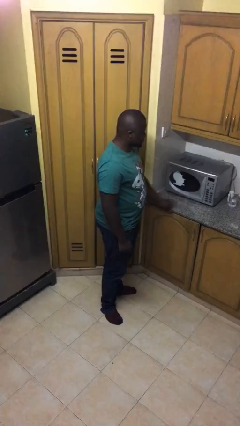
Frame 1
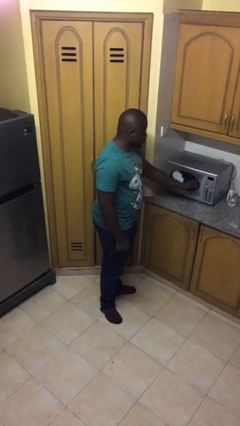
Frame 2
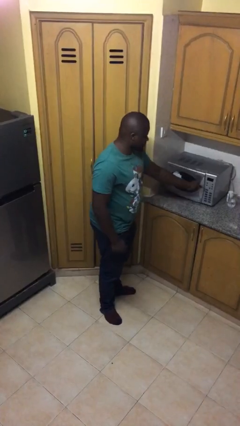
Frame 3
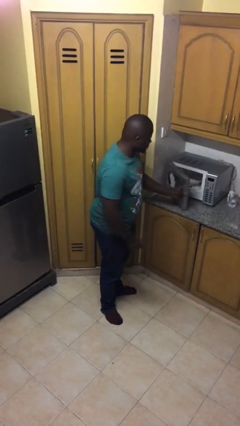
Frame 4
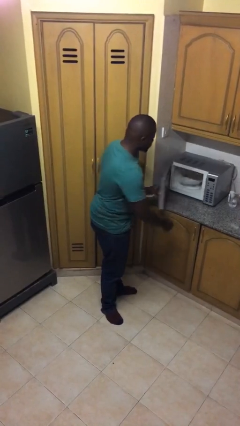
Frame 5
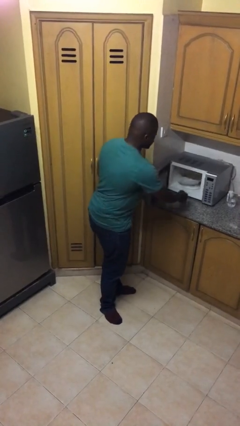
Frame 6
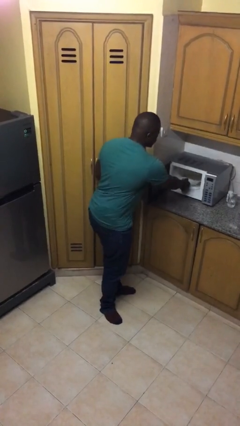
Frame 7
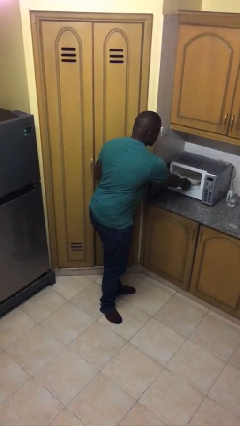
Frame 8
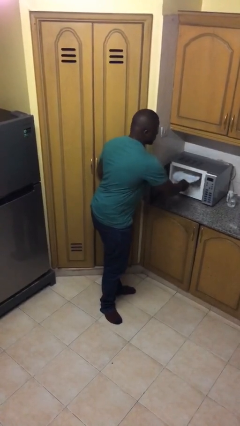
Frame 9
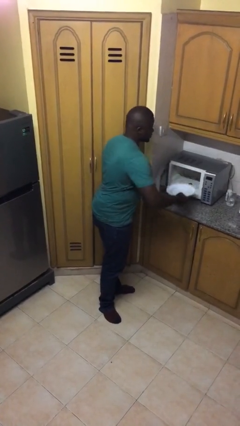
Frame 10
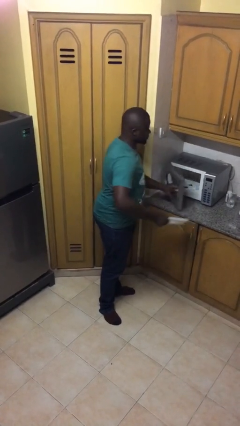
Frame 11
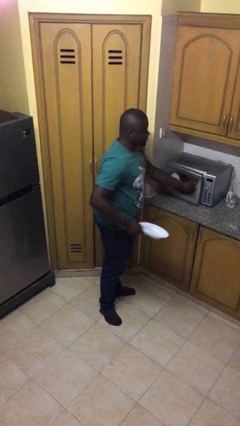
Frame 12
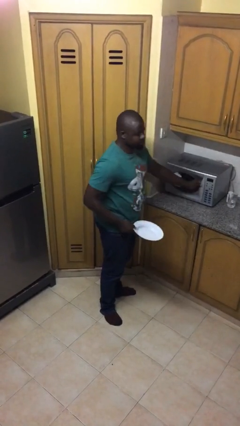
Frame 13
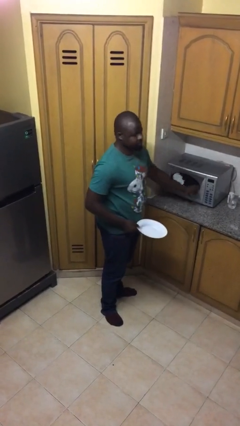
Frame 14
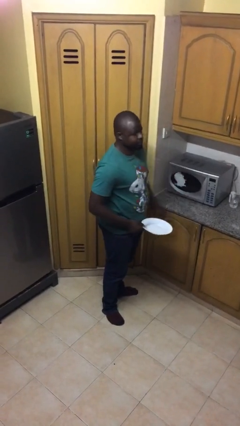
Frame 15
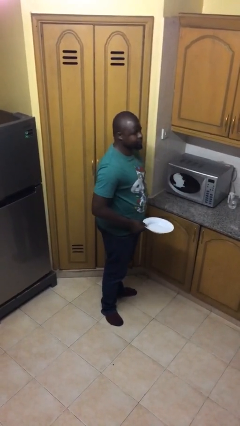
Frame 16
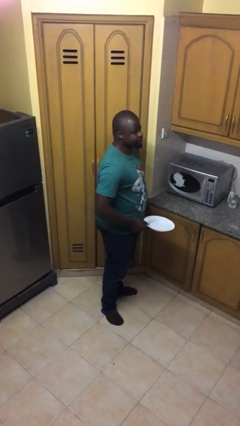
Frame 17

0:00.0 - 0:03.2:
person takes object from microwave

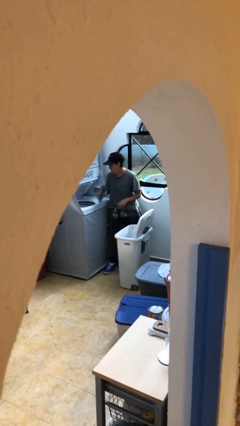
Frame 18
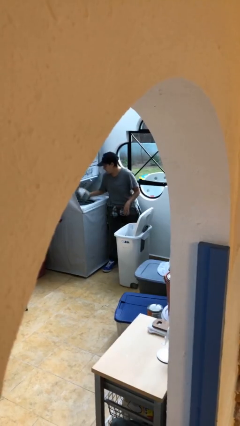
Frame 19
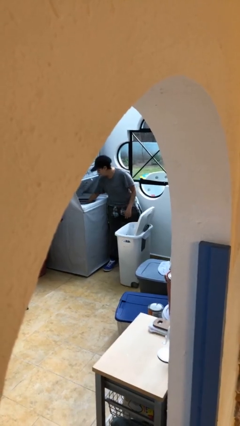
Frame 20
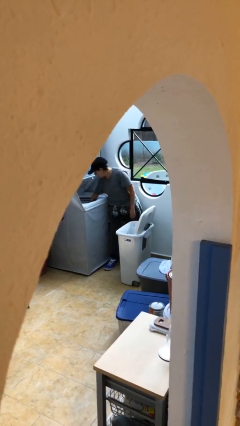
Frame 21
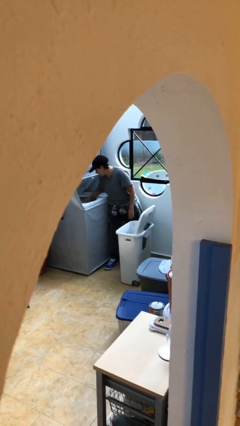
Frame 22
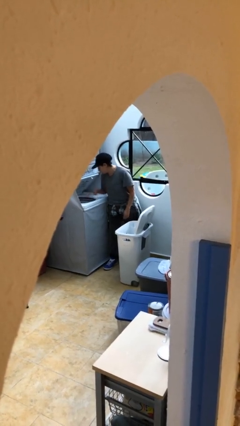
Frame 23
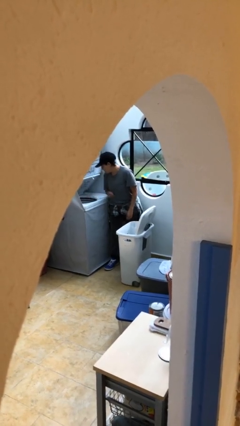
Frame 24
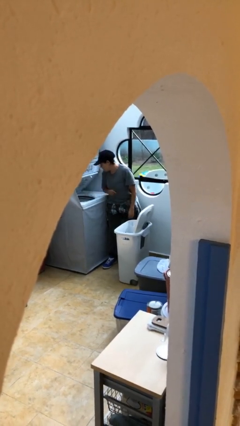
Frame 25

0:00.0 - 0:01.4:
person loads clotheswasher

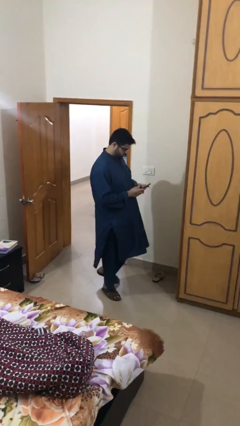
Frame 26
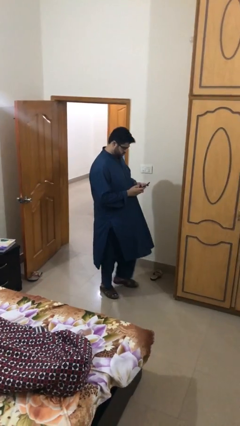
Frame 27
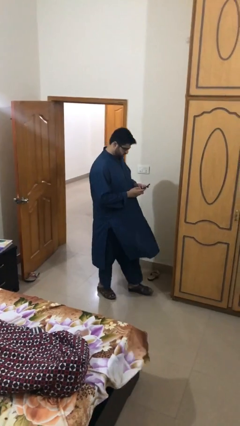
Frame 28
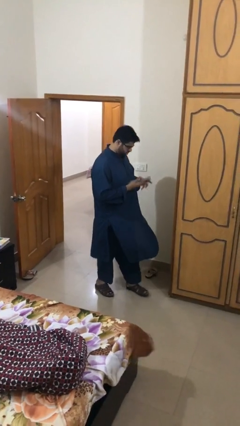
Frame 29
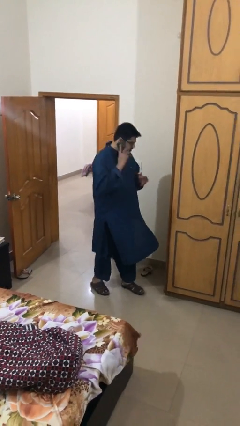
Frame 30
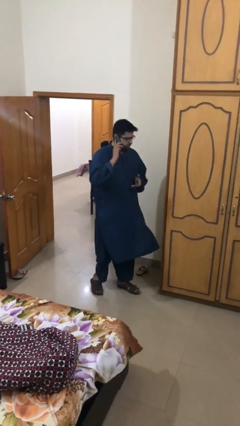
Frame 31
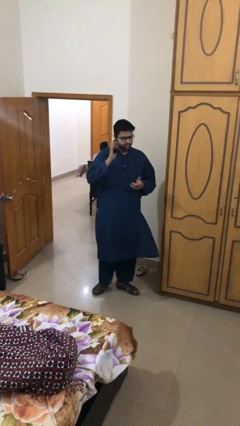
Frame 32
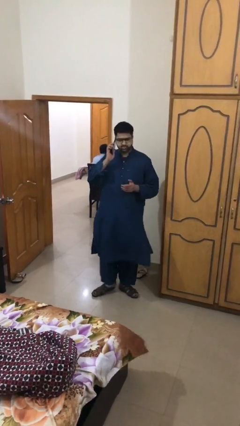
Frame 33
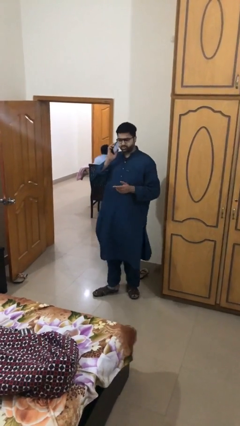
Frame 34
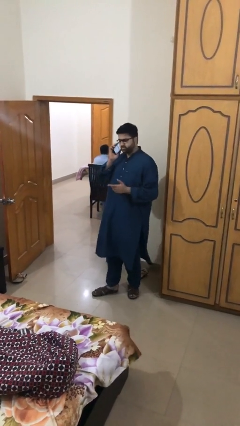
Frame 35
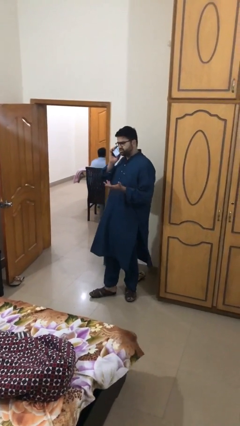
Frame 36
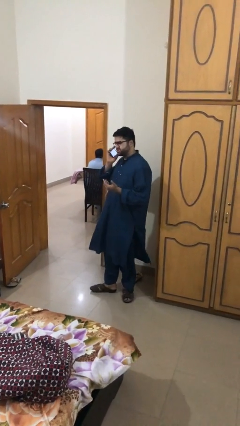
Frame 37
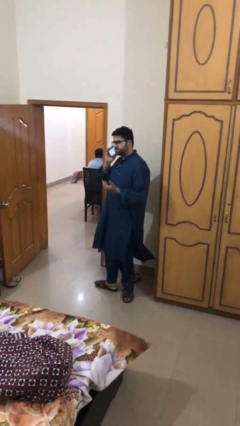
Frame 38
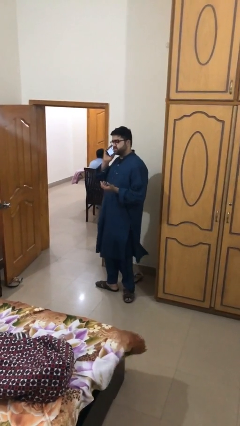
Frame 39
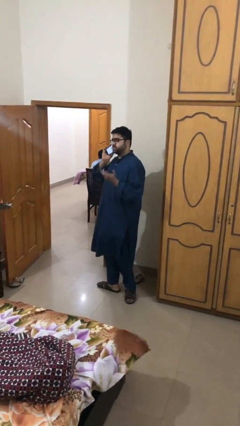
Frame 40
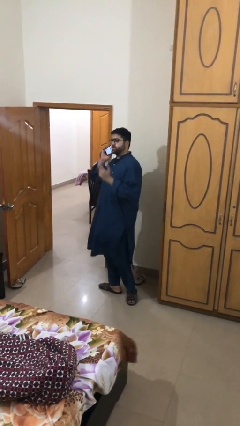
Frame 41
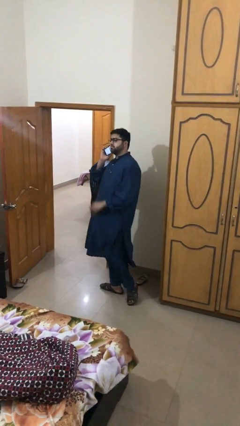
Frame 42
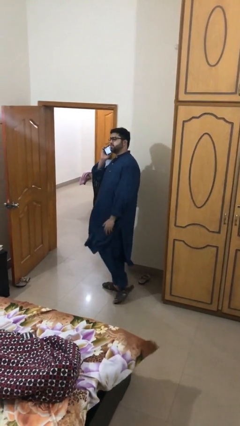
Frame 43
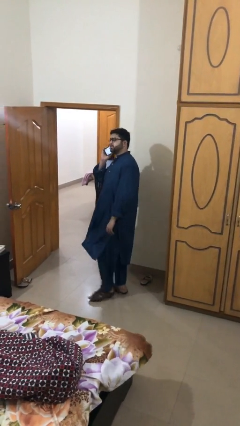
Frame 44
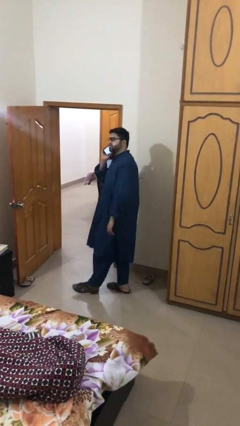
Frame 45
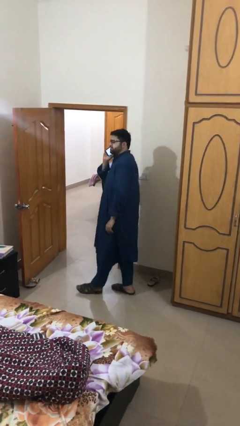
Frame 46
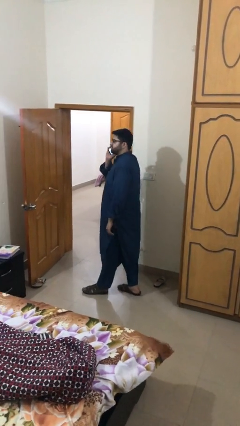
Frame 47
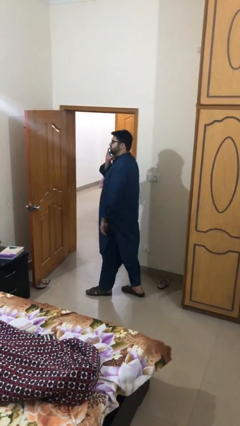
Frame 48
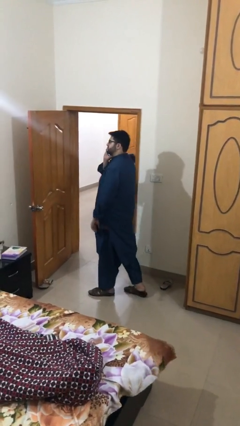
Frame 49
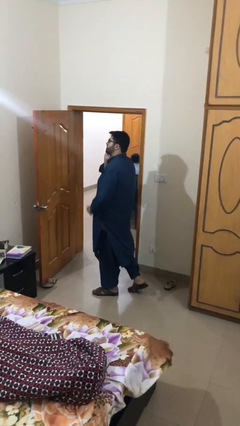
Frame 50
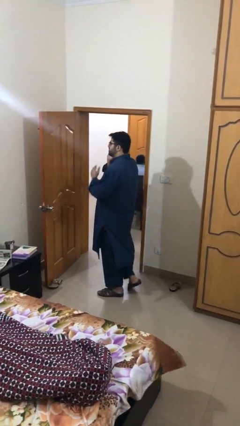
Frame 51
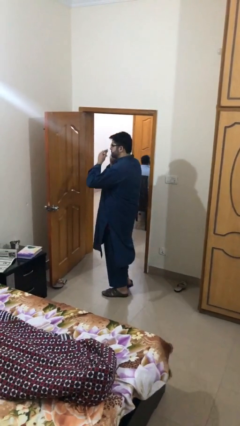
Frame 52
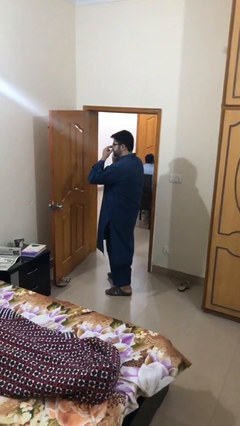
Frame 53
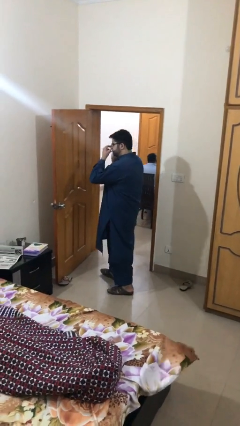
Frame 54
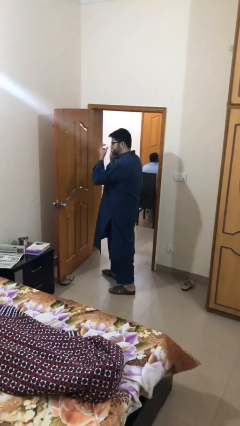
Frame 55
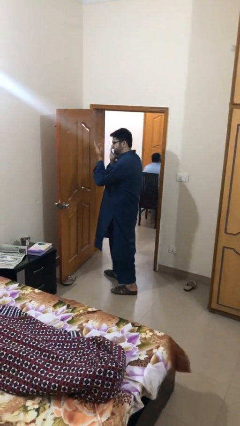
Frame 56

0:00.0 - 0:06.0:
person talks on phone

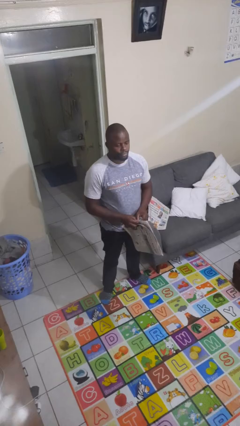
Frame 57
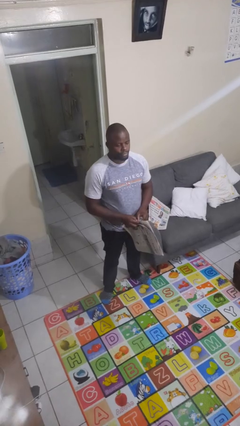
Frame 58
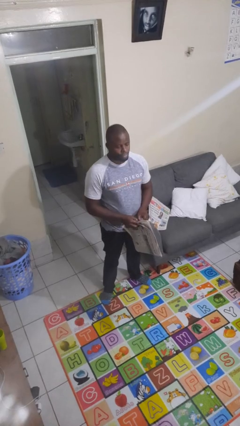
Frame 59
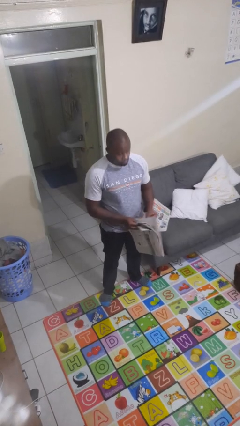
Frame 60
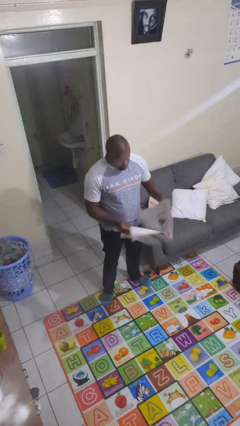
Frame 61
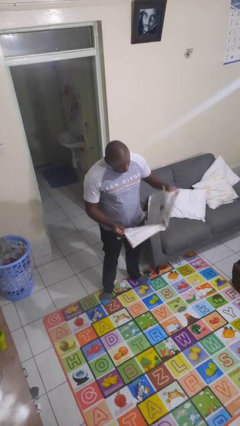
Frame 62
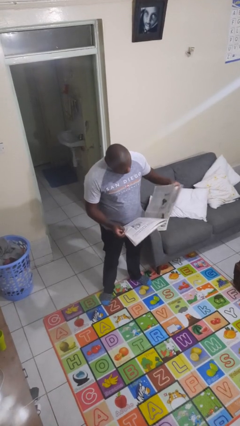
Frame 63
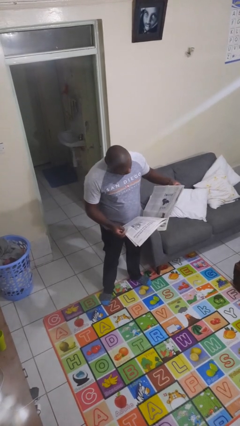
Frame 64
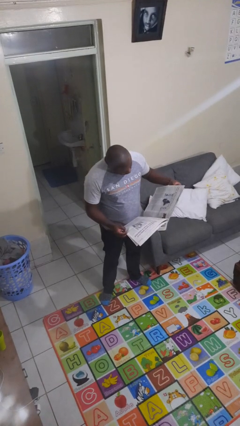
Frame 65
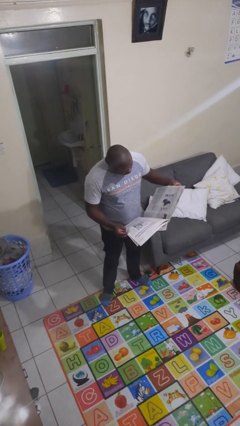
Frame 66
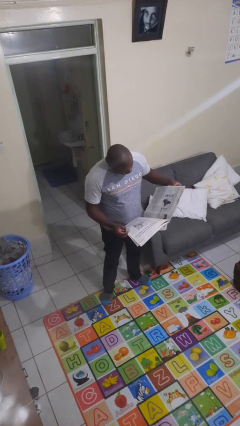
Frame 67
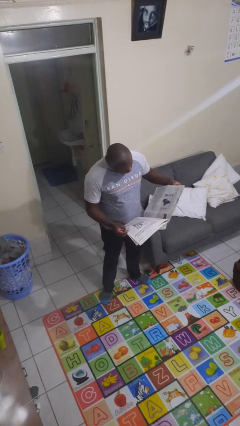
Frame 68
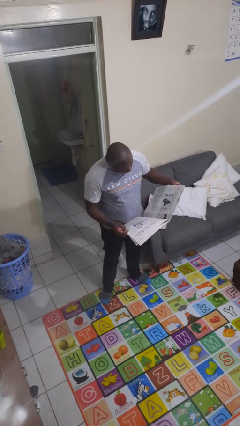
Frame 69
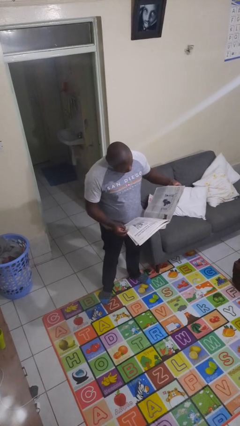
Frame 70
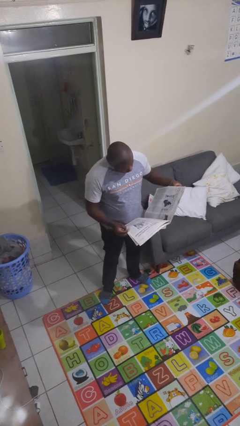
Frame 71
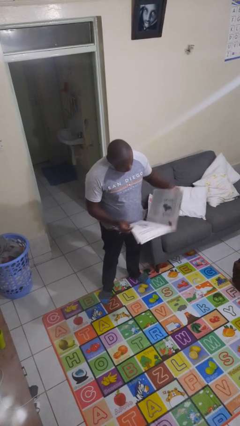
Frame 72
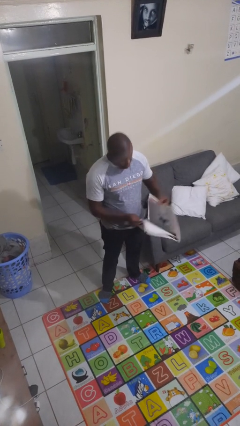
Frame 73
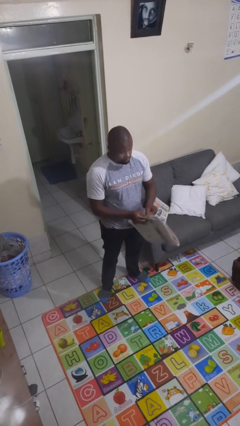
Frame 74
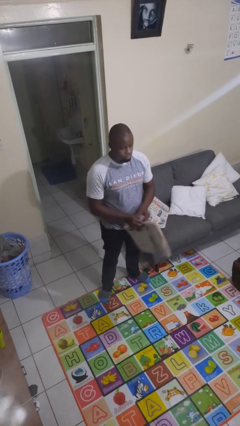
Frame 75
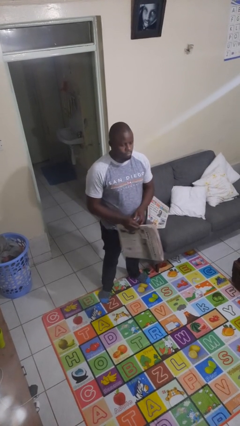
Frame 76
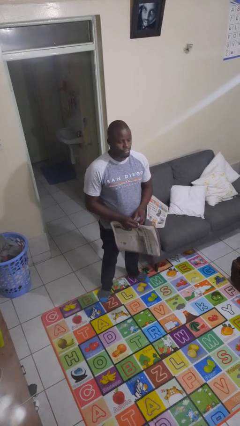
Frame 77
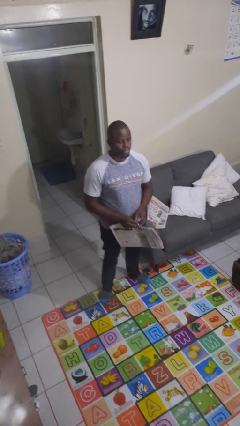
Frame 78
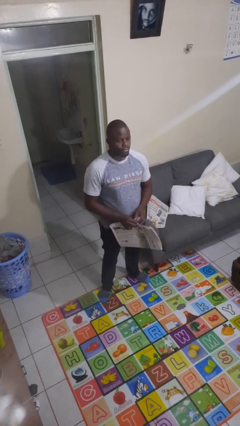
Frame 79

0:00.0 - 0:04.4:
person reads newspaper

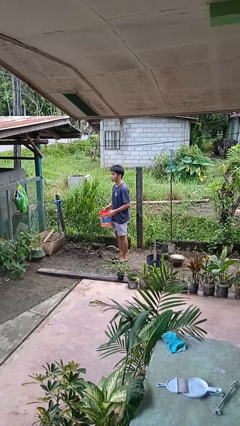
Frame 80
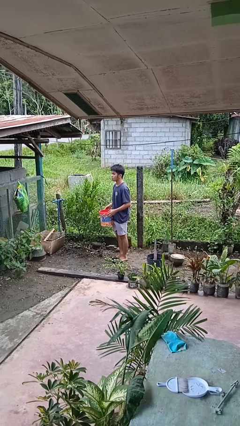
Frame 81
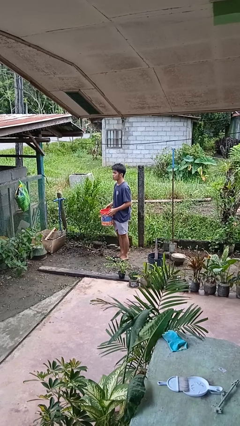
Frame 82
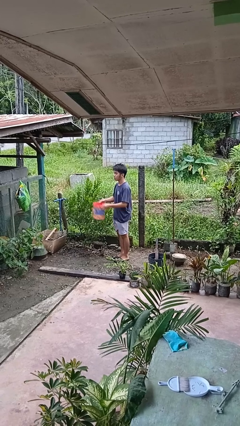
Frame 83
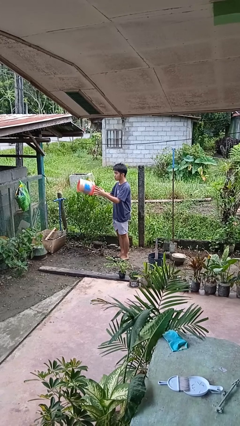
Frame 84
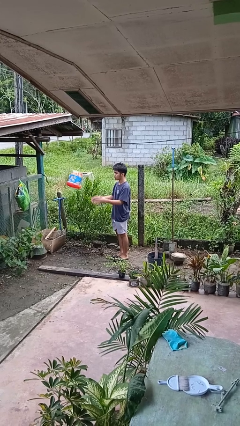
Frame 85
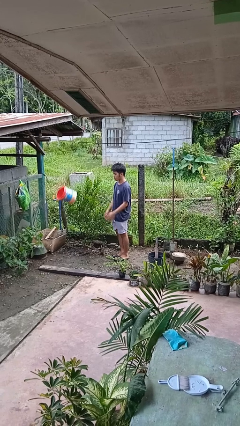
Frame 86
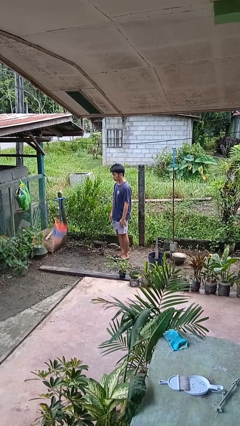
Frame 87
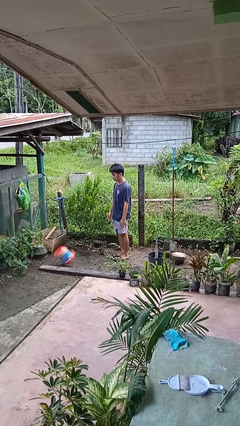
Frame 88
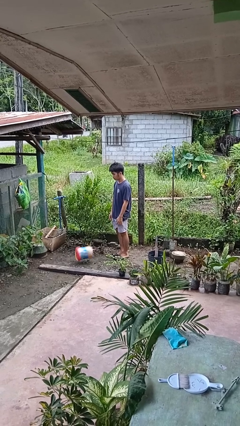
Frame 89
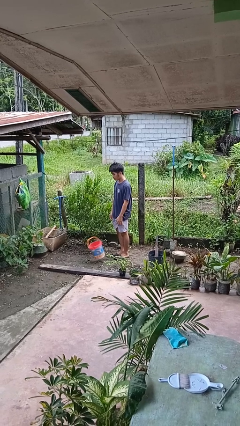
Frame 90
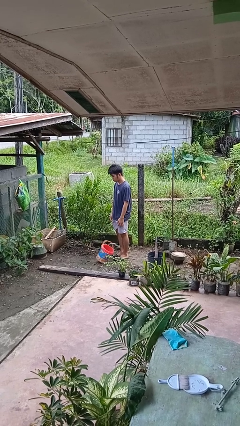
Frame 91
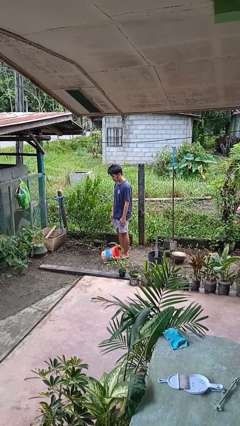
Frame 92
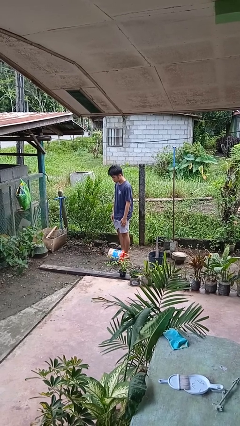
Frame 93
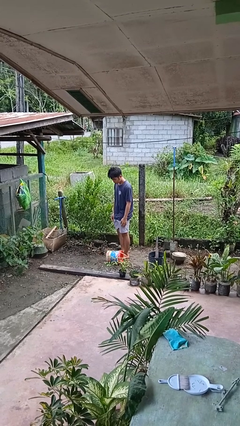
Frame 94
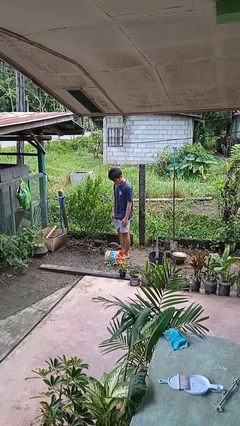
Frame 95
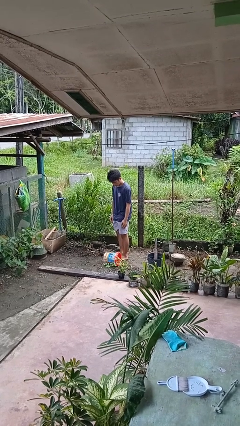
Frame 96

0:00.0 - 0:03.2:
person throws object into air
